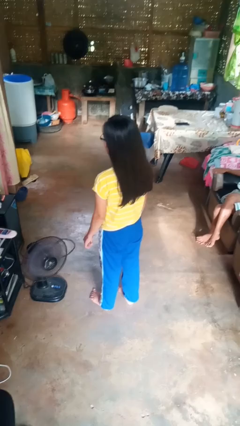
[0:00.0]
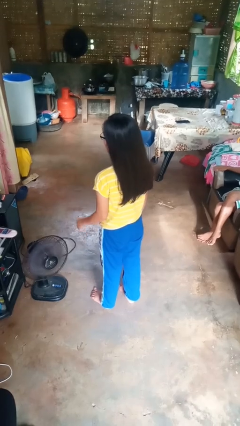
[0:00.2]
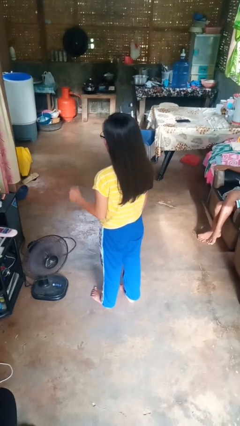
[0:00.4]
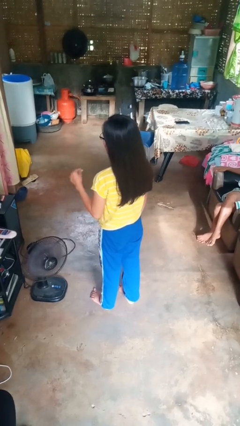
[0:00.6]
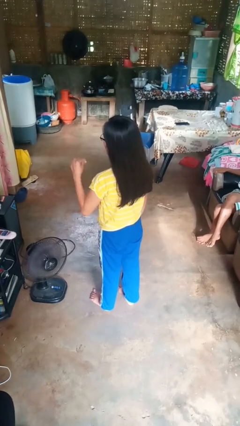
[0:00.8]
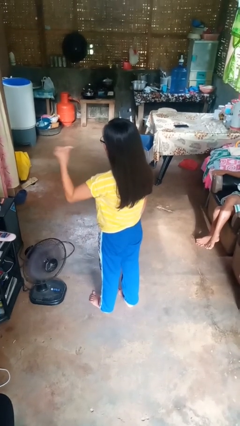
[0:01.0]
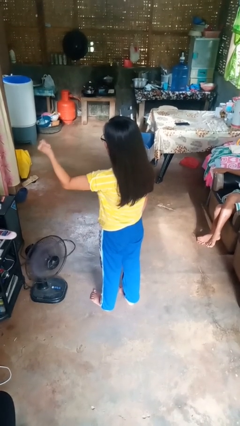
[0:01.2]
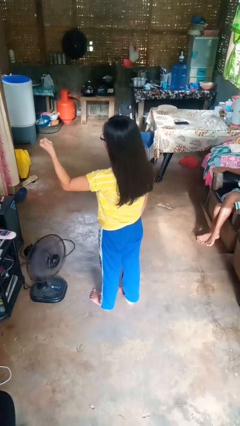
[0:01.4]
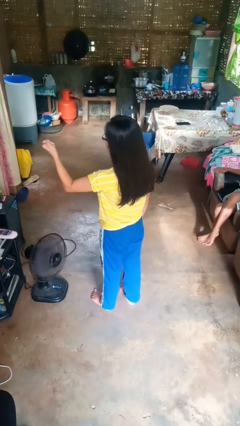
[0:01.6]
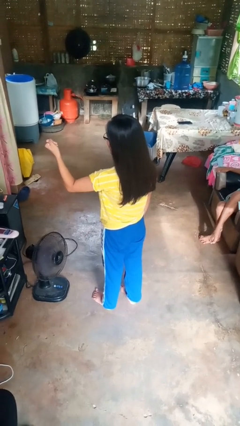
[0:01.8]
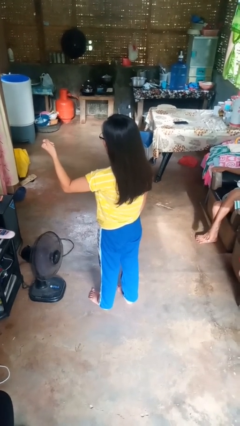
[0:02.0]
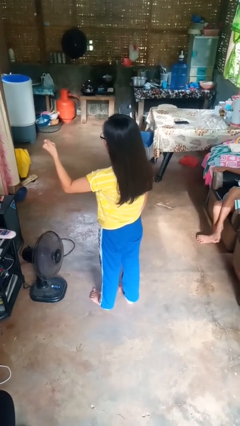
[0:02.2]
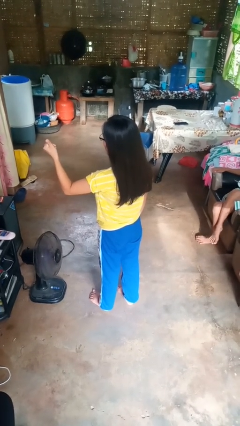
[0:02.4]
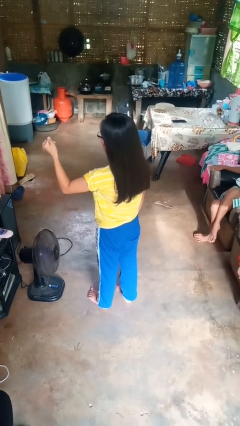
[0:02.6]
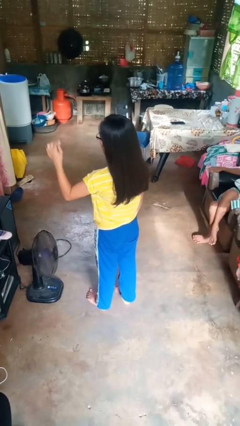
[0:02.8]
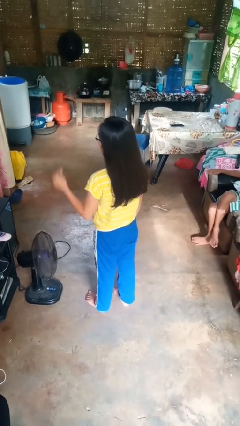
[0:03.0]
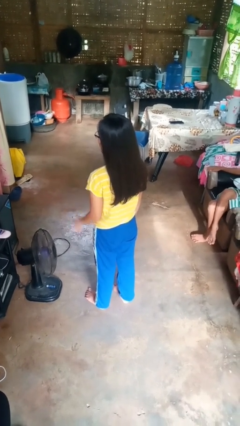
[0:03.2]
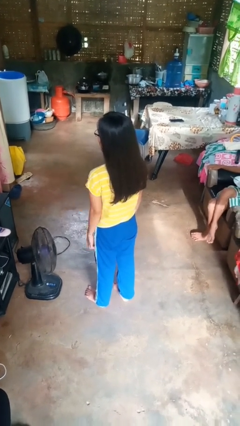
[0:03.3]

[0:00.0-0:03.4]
person snaps fingers

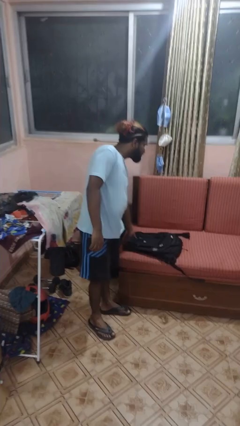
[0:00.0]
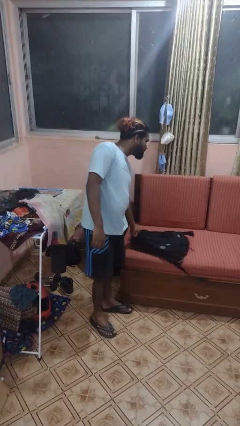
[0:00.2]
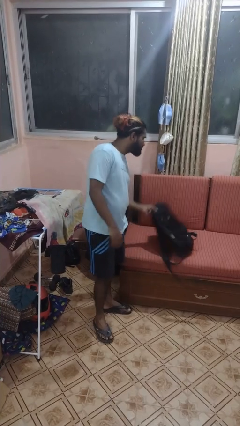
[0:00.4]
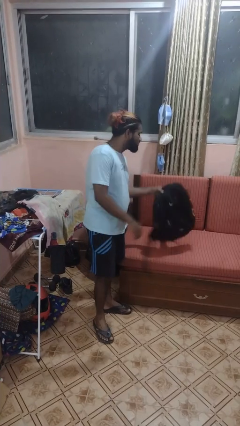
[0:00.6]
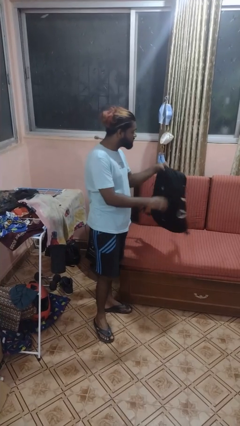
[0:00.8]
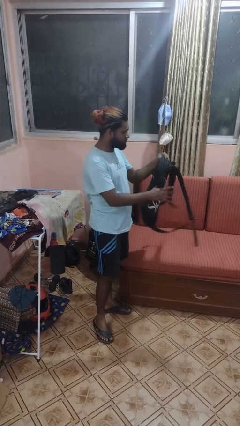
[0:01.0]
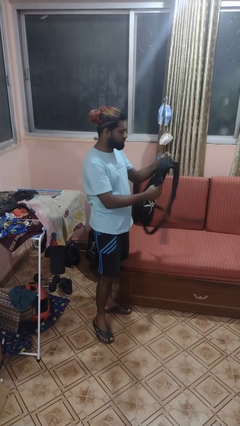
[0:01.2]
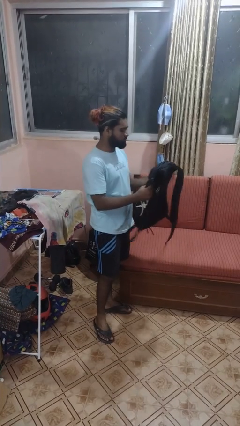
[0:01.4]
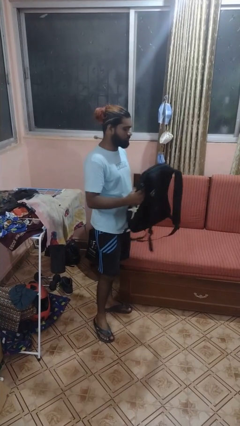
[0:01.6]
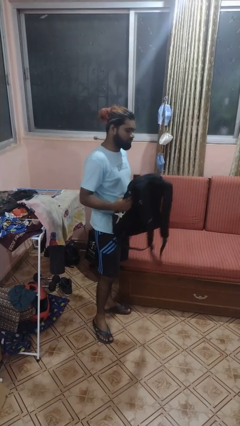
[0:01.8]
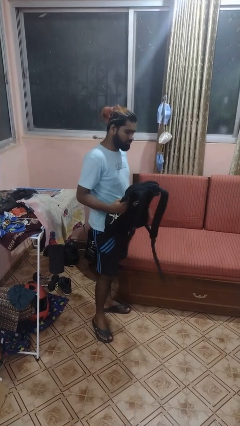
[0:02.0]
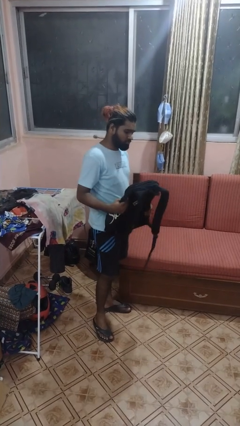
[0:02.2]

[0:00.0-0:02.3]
person picks up object from couch

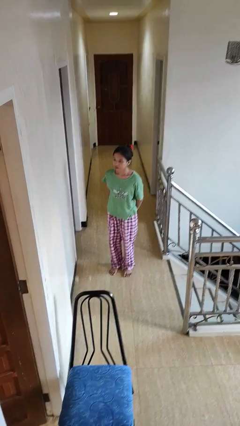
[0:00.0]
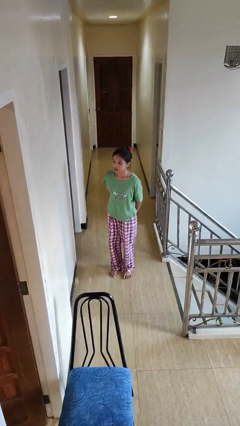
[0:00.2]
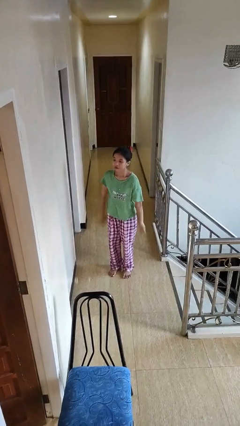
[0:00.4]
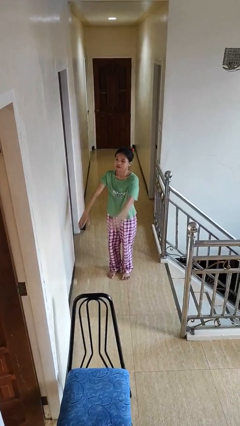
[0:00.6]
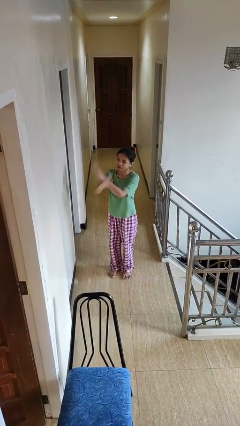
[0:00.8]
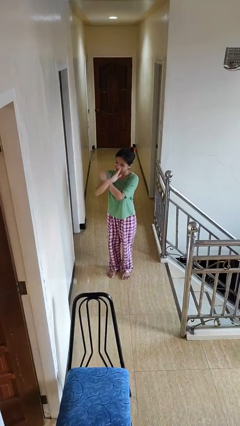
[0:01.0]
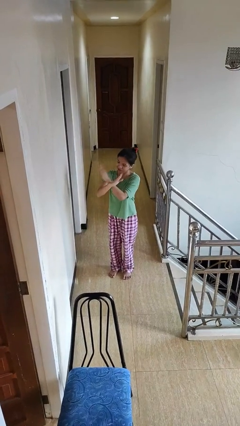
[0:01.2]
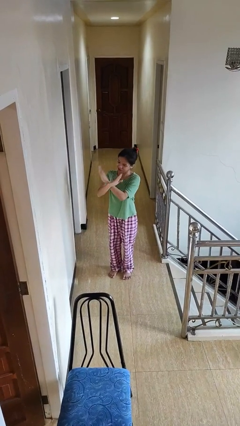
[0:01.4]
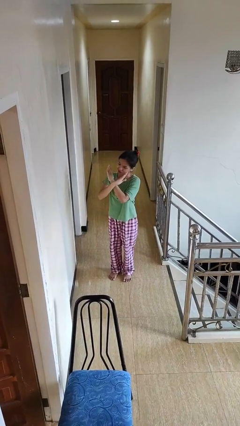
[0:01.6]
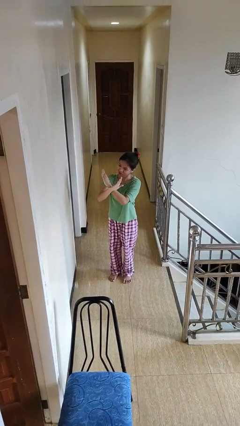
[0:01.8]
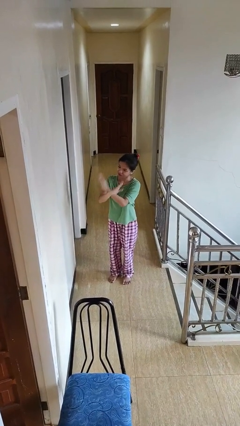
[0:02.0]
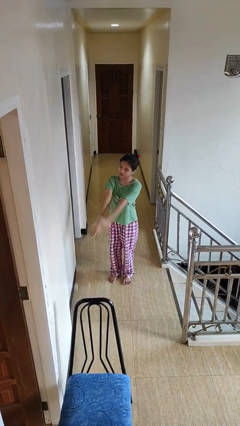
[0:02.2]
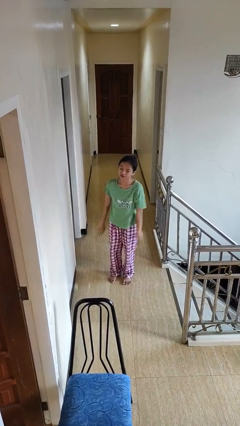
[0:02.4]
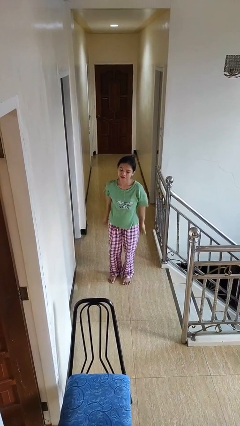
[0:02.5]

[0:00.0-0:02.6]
person gestures arms x

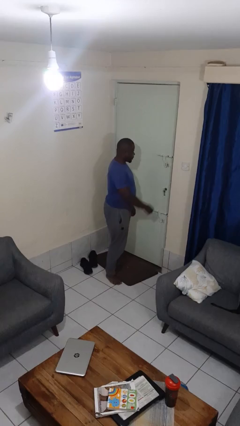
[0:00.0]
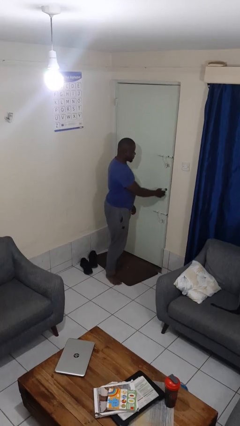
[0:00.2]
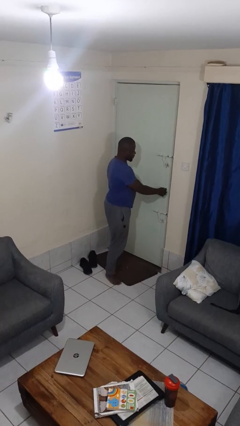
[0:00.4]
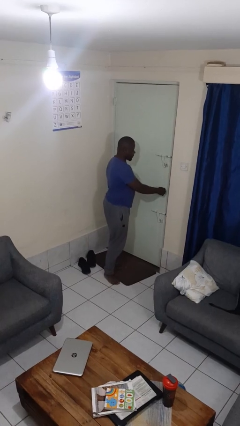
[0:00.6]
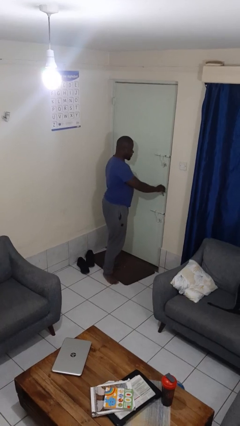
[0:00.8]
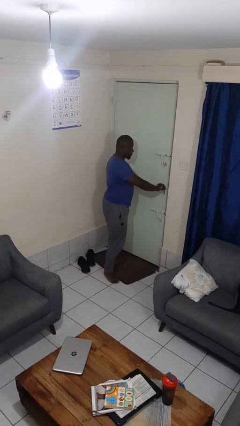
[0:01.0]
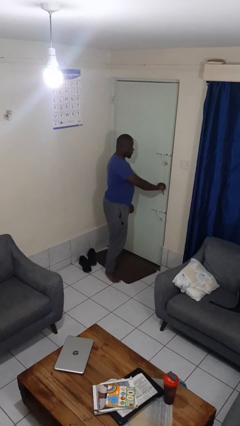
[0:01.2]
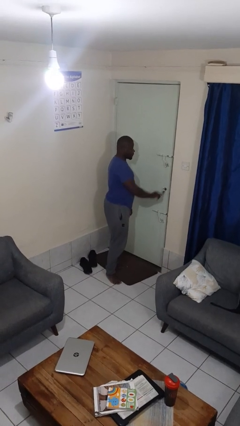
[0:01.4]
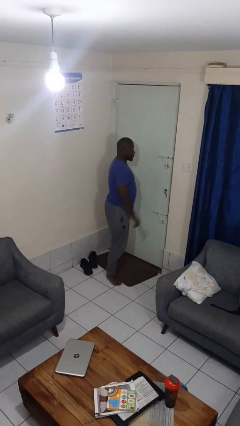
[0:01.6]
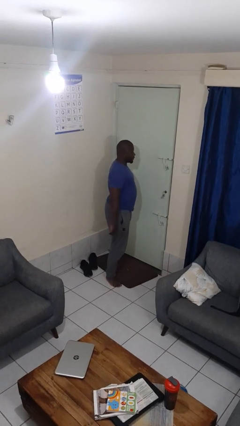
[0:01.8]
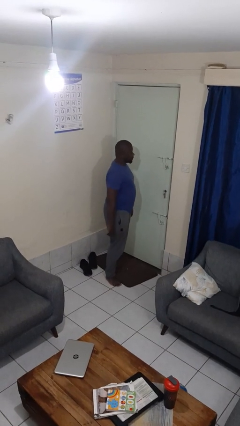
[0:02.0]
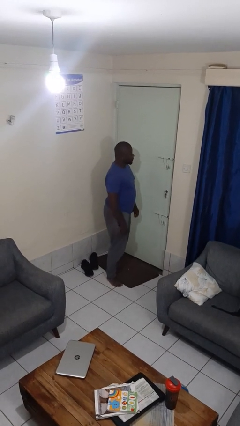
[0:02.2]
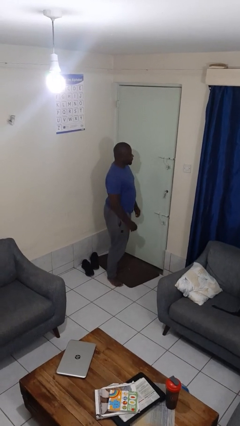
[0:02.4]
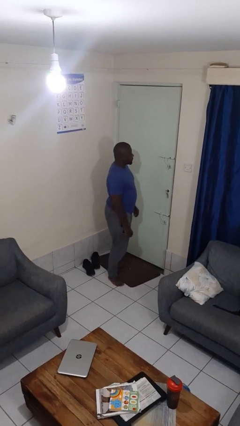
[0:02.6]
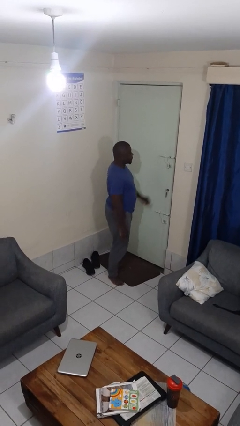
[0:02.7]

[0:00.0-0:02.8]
person unlocks door with keys

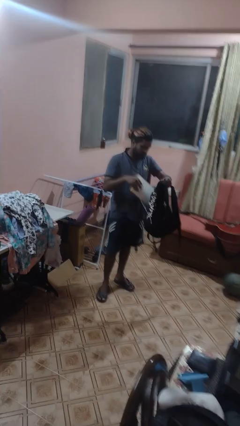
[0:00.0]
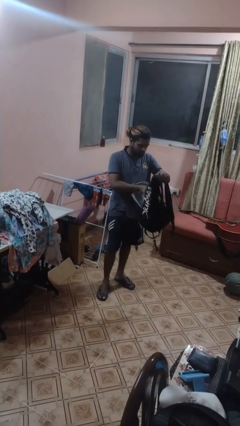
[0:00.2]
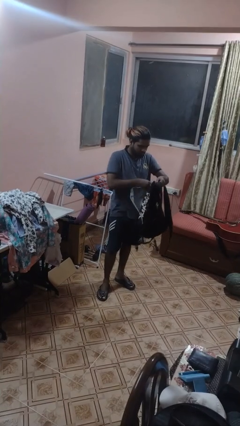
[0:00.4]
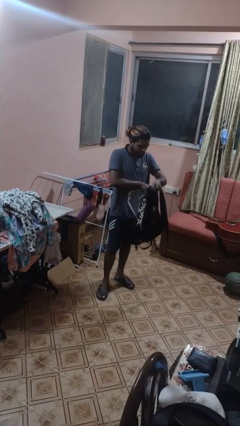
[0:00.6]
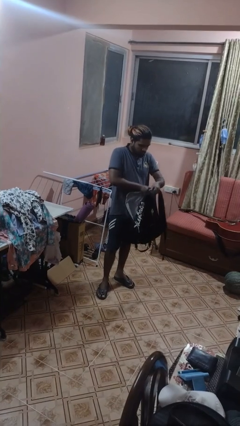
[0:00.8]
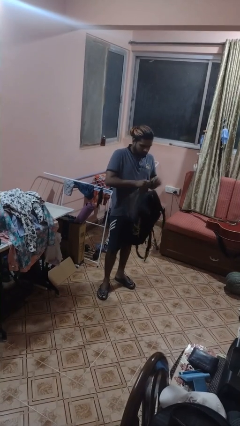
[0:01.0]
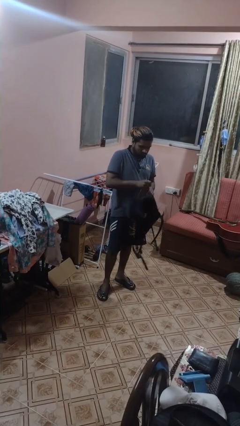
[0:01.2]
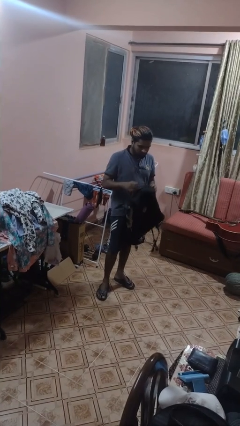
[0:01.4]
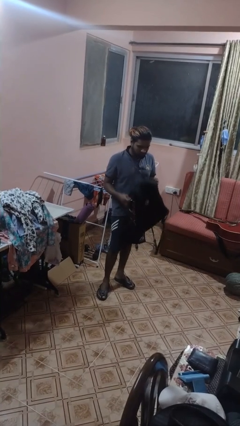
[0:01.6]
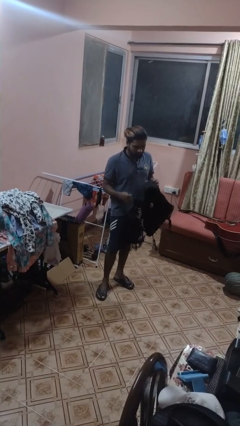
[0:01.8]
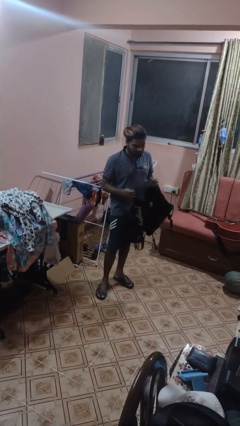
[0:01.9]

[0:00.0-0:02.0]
person puts object into backpack

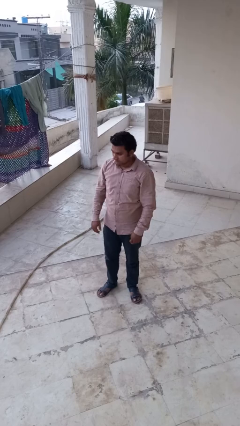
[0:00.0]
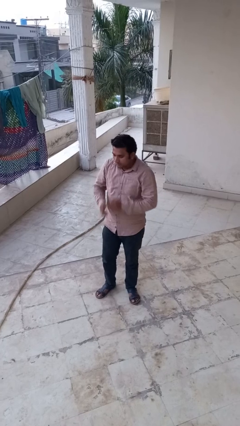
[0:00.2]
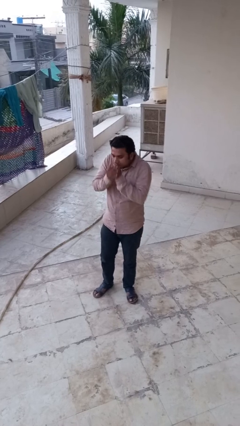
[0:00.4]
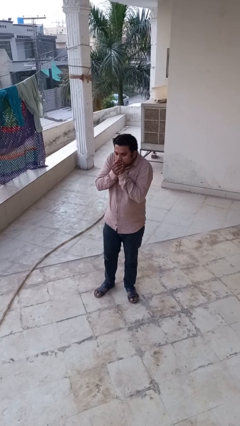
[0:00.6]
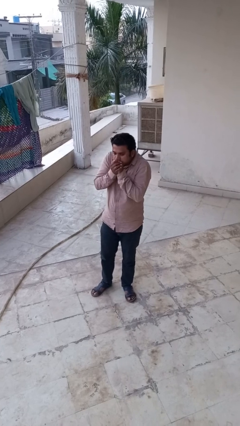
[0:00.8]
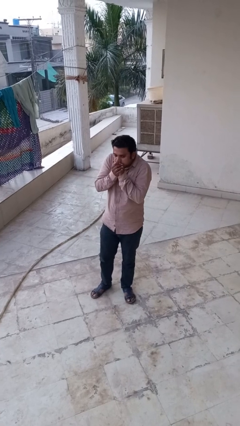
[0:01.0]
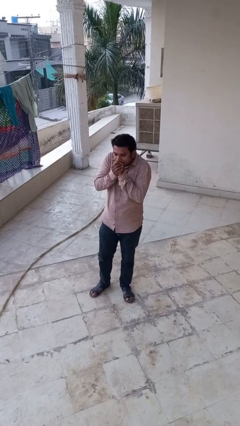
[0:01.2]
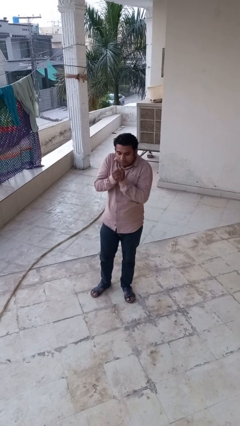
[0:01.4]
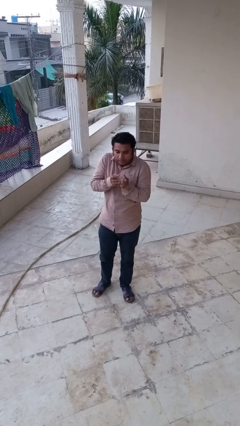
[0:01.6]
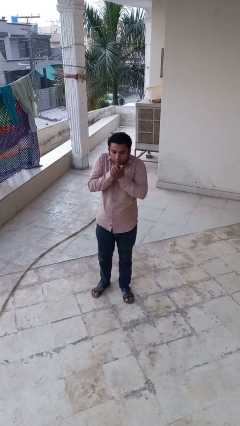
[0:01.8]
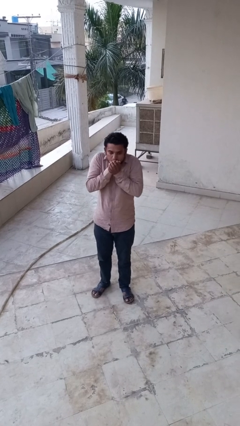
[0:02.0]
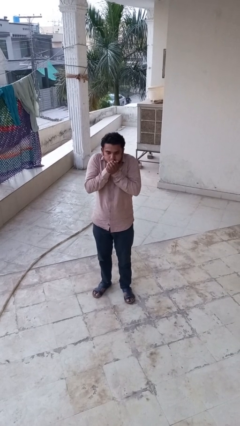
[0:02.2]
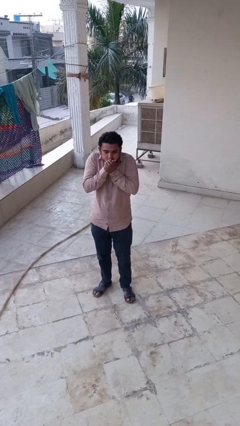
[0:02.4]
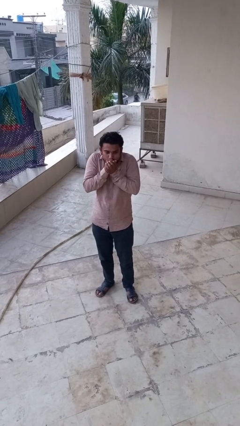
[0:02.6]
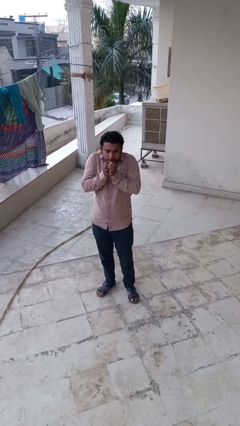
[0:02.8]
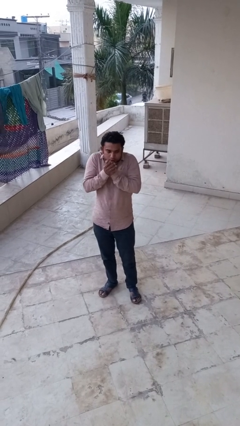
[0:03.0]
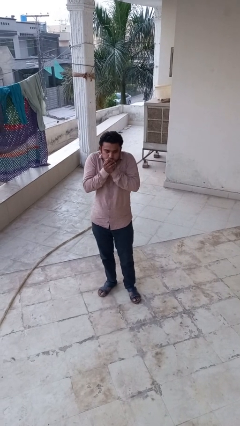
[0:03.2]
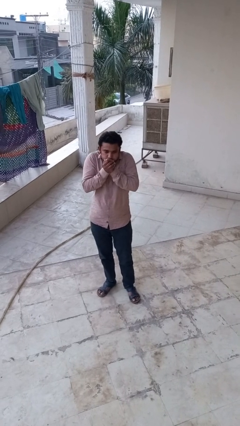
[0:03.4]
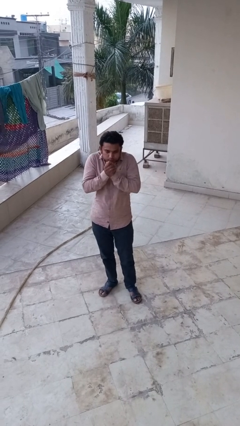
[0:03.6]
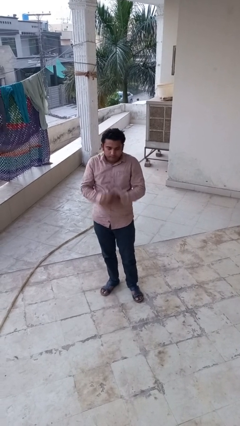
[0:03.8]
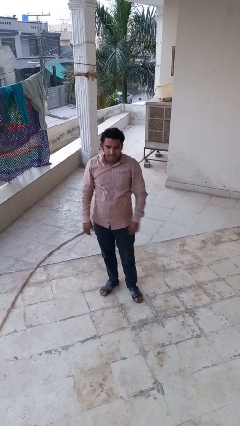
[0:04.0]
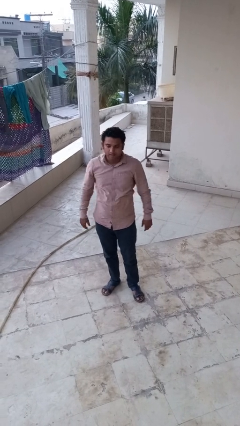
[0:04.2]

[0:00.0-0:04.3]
person blows into hands
